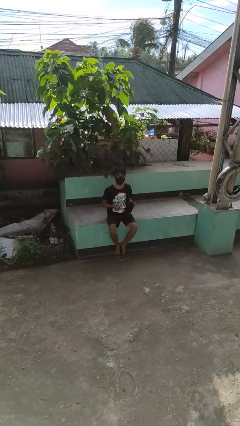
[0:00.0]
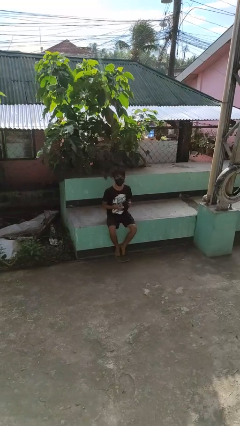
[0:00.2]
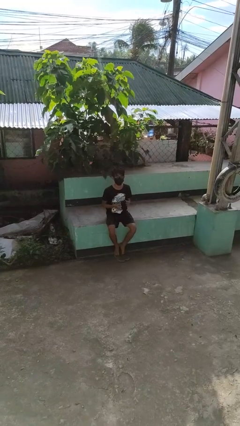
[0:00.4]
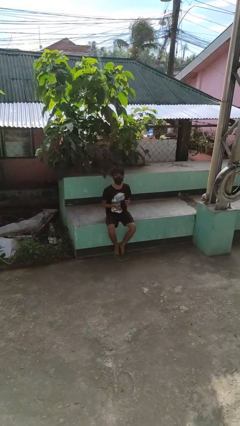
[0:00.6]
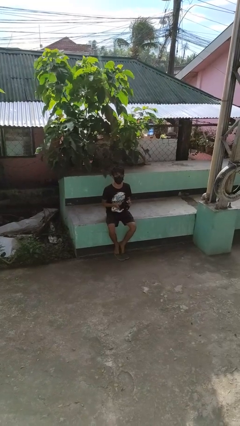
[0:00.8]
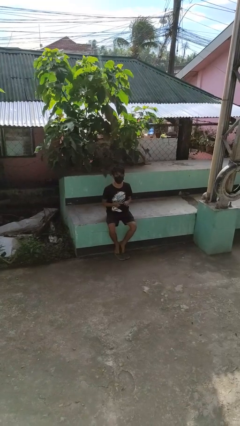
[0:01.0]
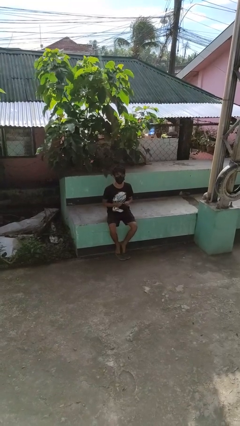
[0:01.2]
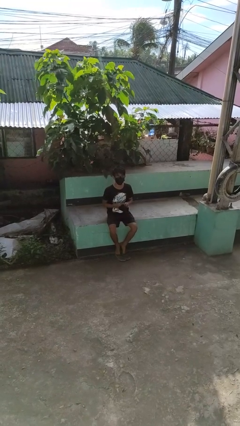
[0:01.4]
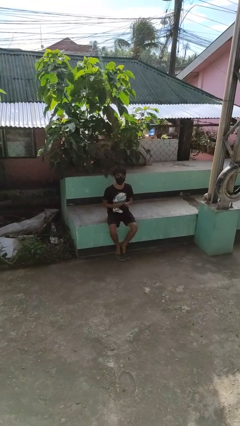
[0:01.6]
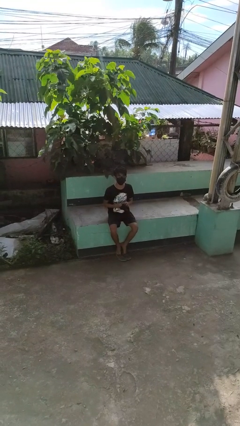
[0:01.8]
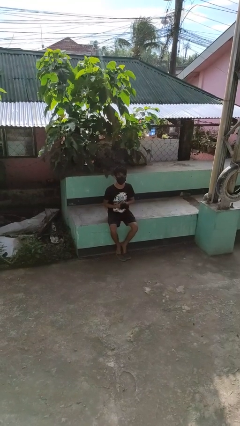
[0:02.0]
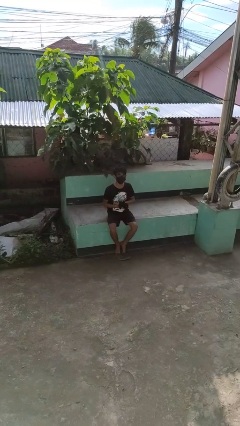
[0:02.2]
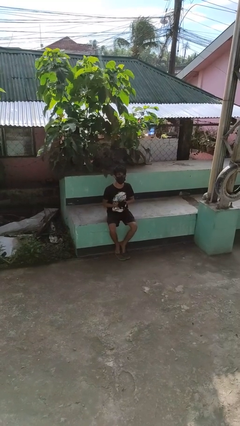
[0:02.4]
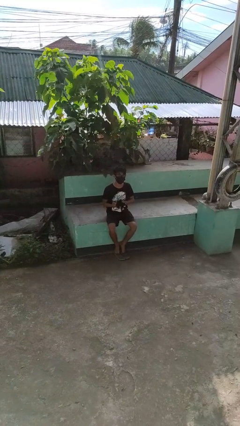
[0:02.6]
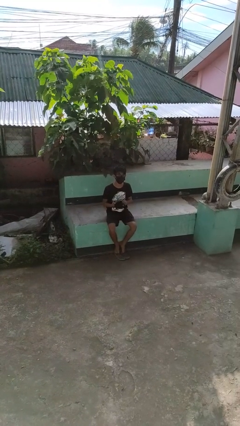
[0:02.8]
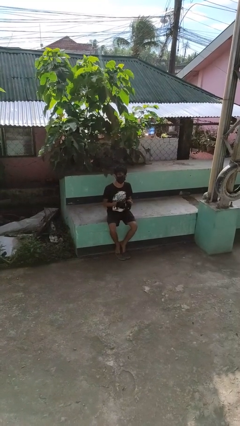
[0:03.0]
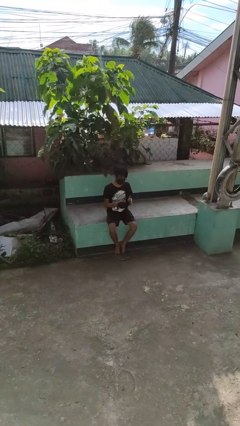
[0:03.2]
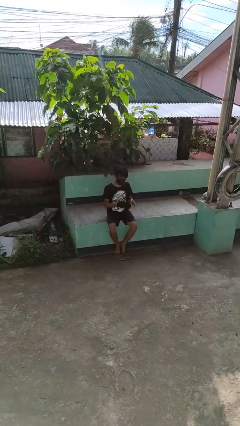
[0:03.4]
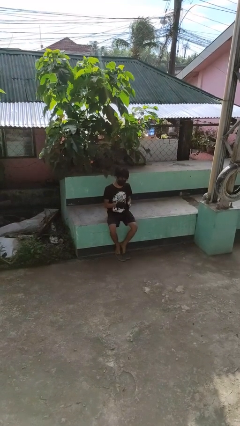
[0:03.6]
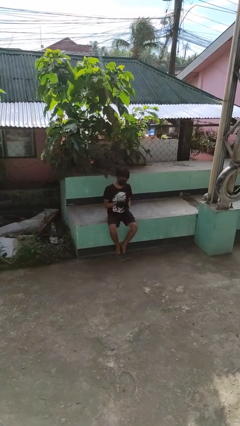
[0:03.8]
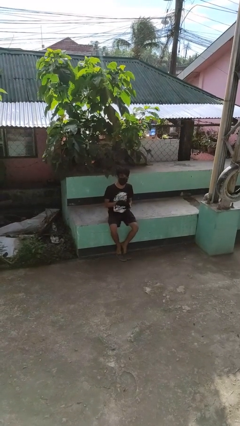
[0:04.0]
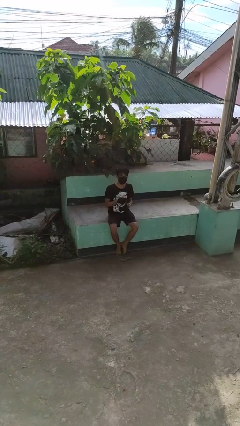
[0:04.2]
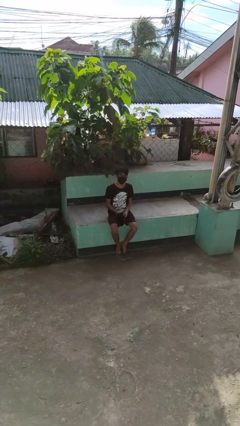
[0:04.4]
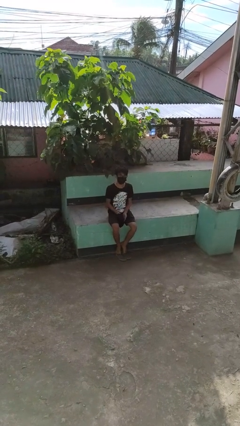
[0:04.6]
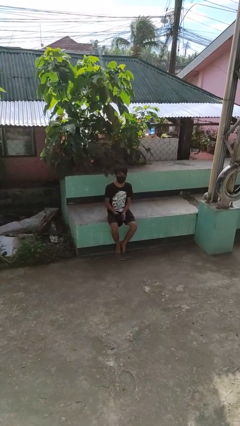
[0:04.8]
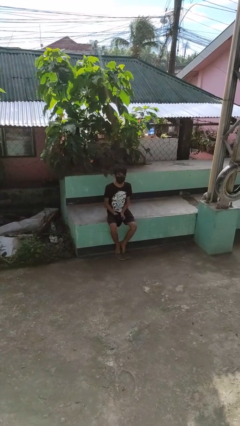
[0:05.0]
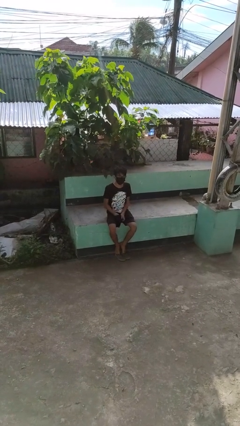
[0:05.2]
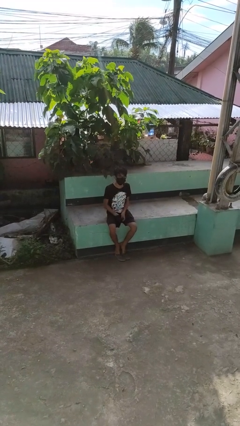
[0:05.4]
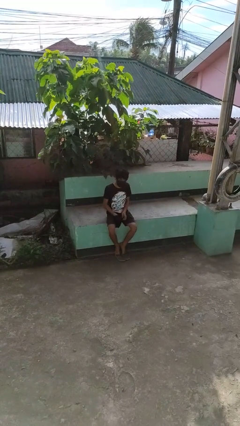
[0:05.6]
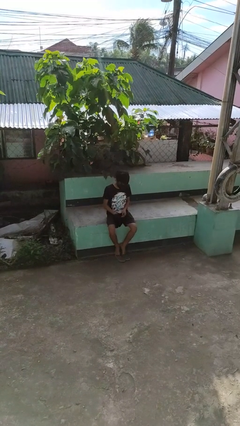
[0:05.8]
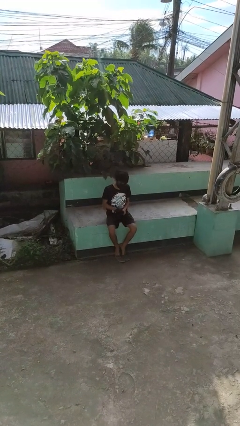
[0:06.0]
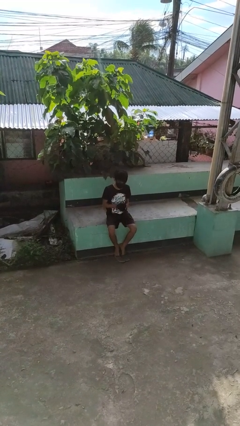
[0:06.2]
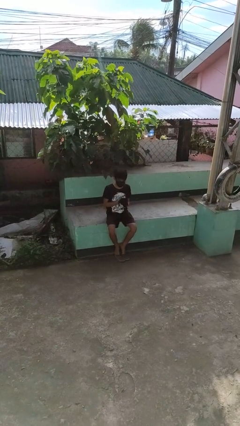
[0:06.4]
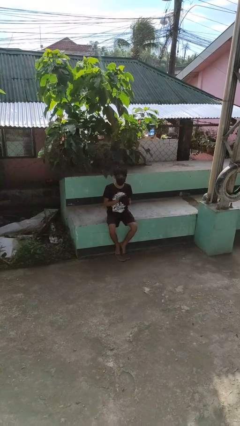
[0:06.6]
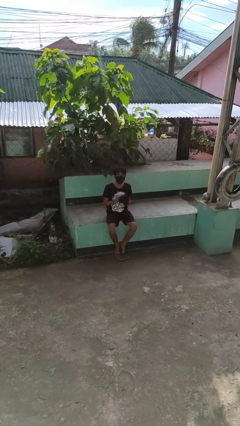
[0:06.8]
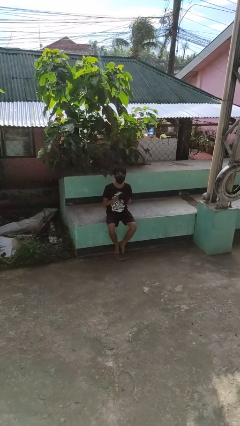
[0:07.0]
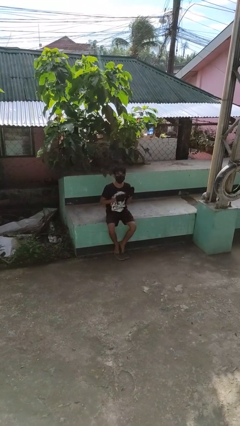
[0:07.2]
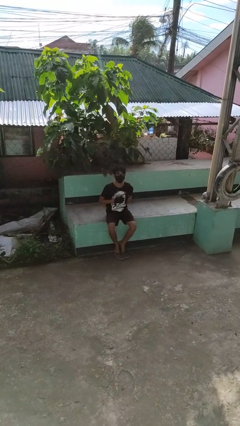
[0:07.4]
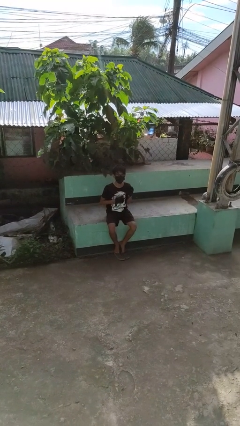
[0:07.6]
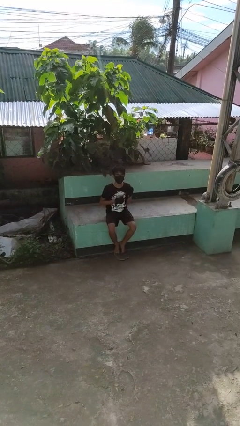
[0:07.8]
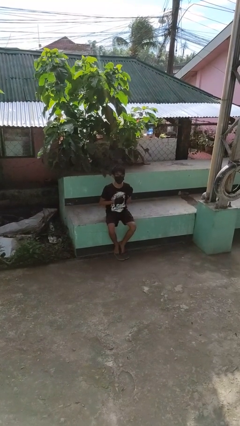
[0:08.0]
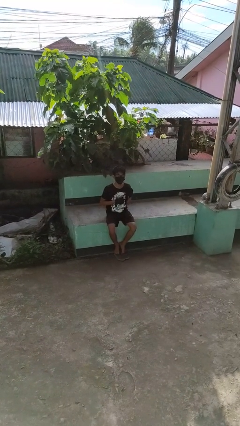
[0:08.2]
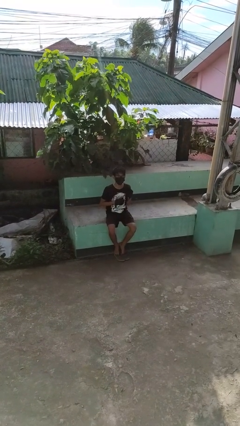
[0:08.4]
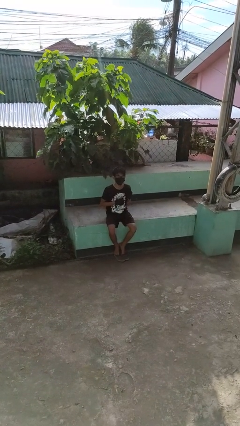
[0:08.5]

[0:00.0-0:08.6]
person puts on gloves

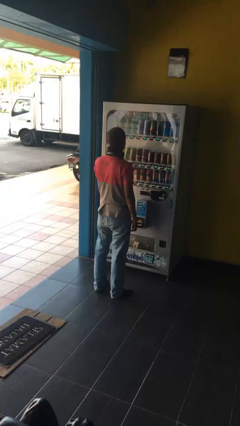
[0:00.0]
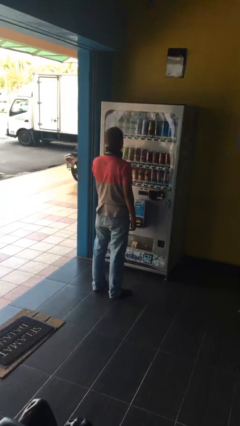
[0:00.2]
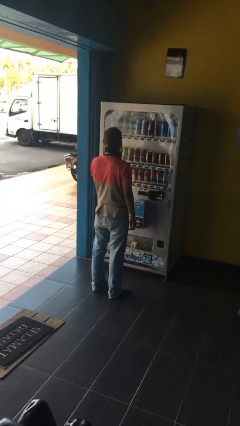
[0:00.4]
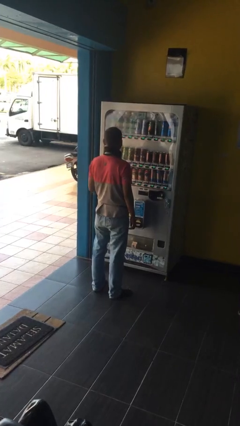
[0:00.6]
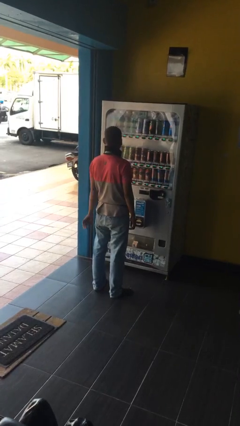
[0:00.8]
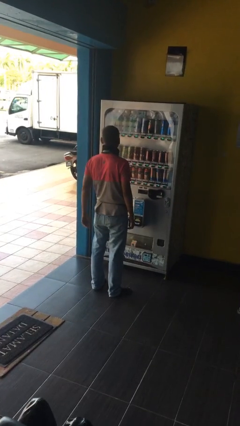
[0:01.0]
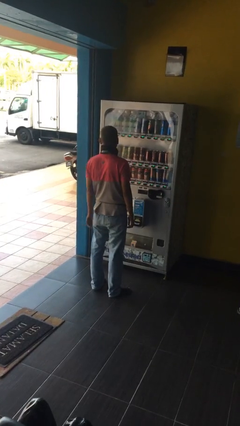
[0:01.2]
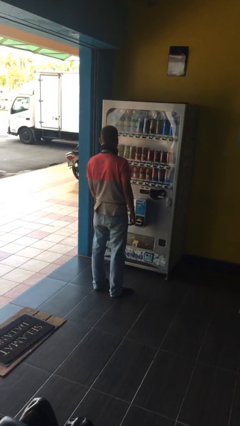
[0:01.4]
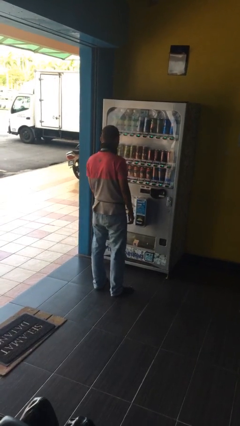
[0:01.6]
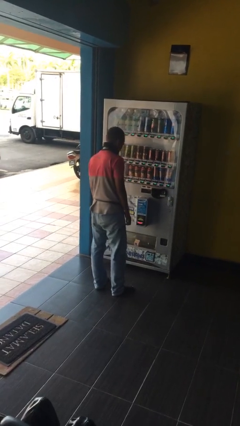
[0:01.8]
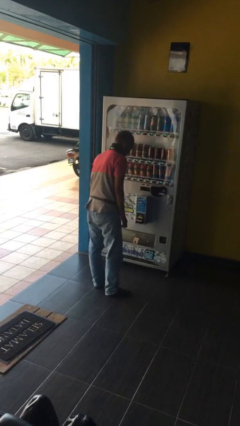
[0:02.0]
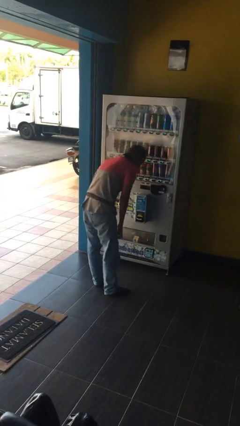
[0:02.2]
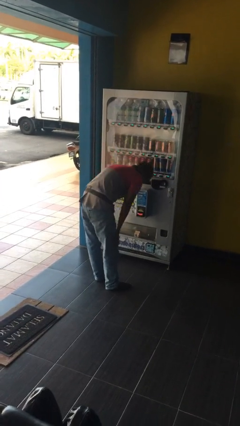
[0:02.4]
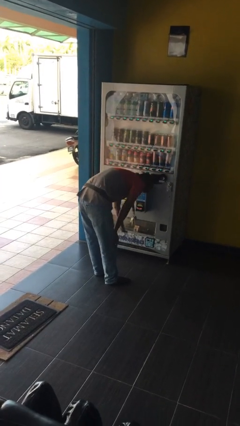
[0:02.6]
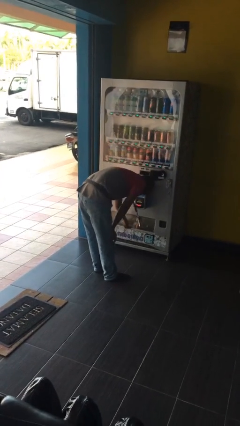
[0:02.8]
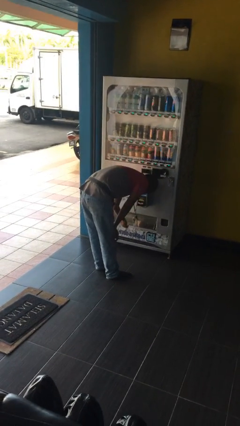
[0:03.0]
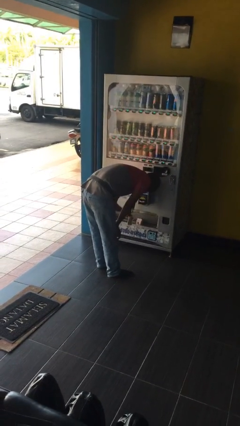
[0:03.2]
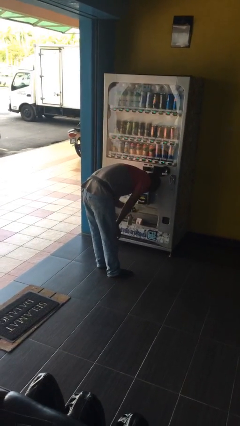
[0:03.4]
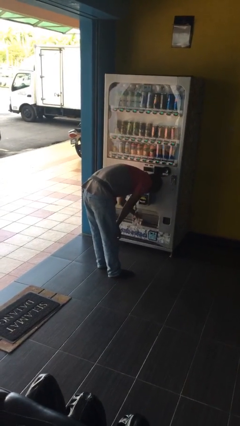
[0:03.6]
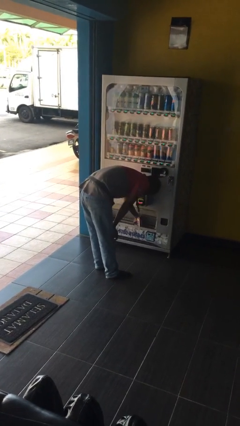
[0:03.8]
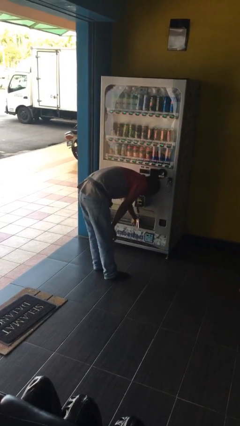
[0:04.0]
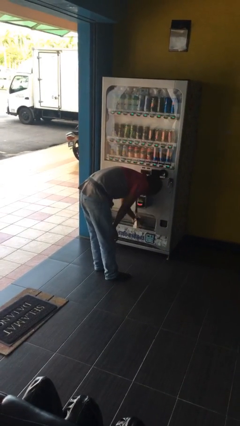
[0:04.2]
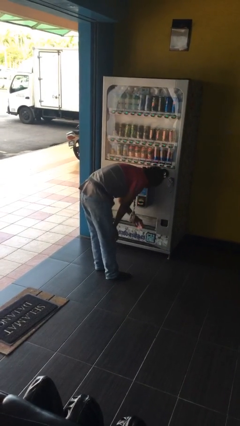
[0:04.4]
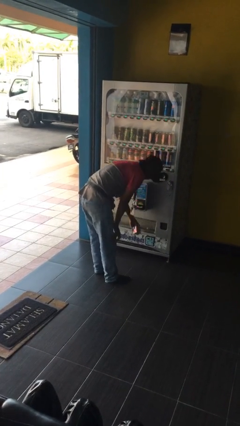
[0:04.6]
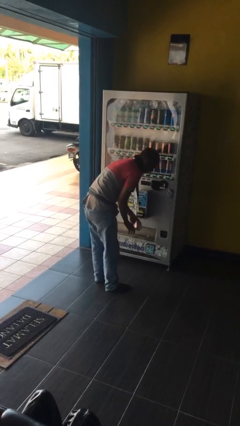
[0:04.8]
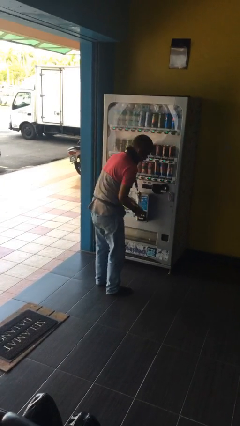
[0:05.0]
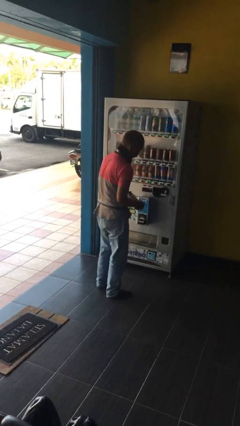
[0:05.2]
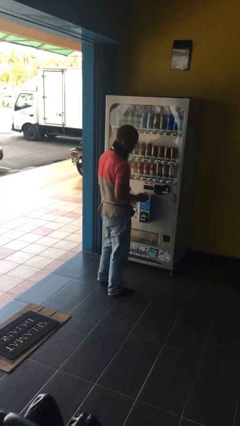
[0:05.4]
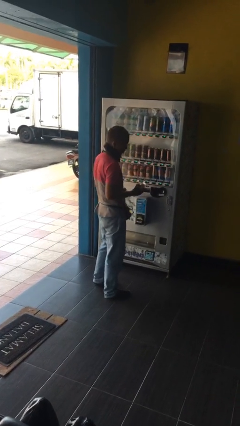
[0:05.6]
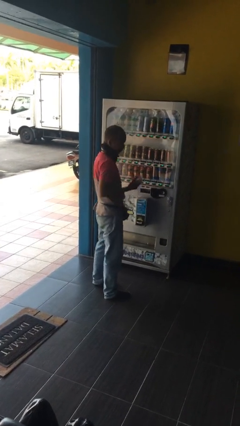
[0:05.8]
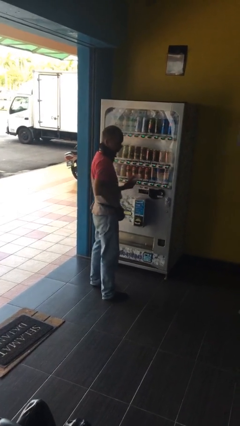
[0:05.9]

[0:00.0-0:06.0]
person purchases from machine

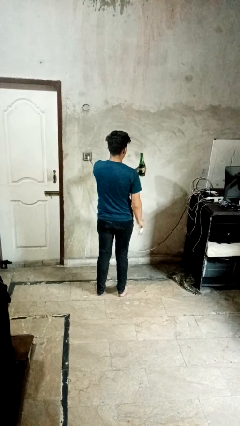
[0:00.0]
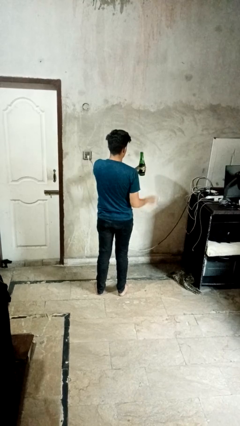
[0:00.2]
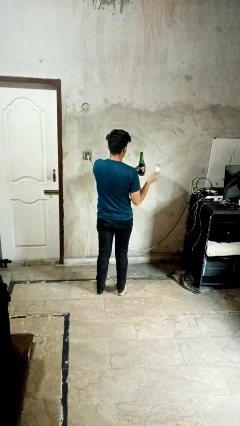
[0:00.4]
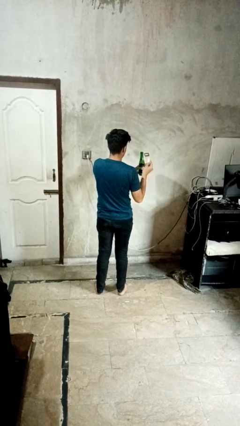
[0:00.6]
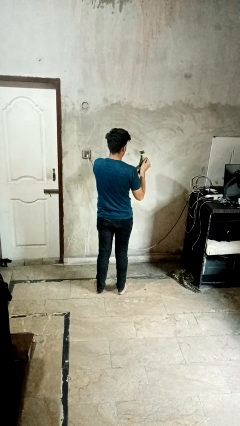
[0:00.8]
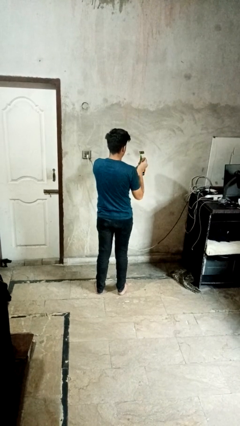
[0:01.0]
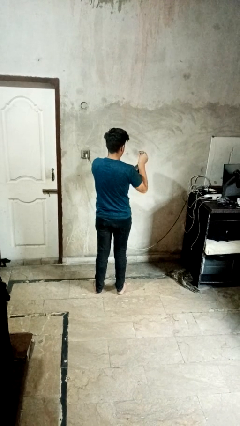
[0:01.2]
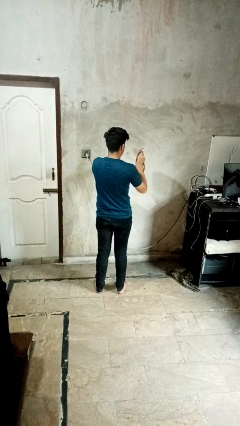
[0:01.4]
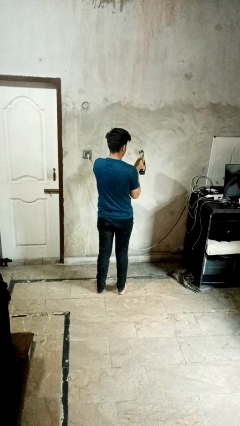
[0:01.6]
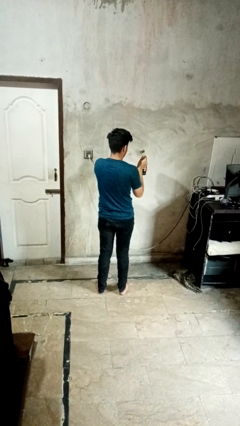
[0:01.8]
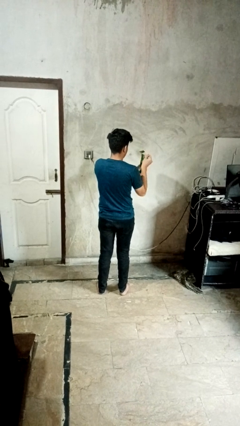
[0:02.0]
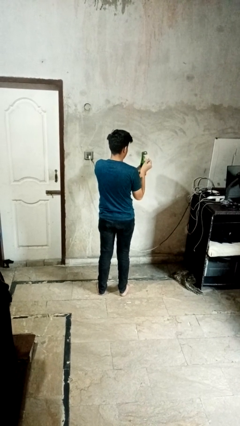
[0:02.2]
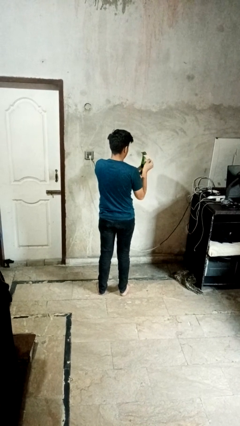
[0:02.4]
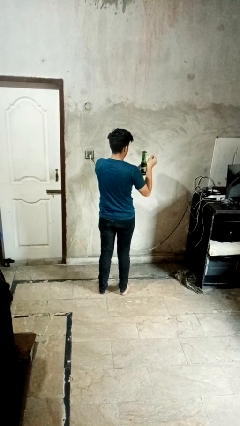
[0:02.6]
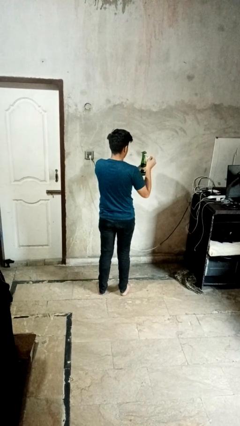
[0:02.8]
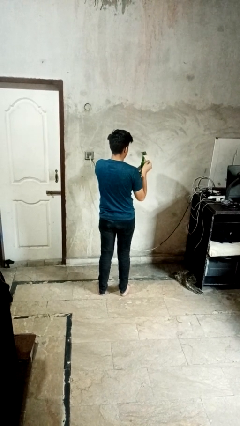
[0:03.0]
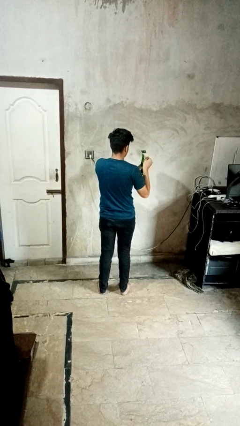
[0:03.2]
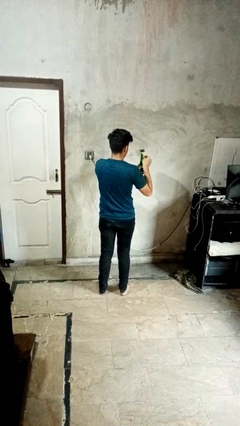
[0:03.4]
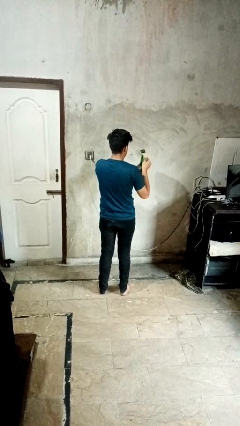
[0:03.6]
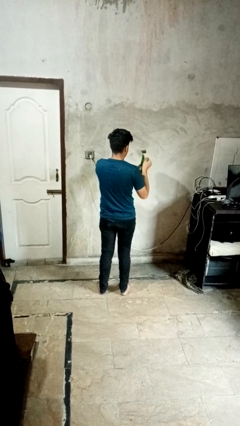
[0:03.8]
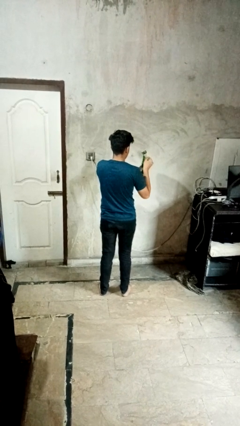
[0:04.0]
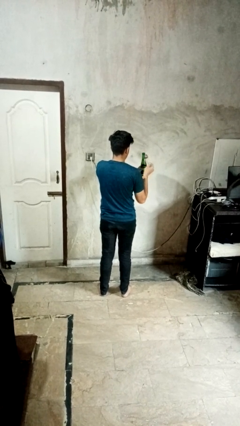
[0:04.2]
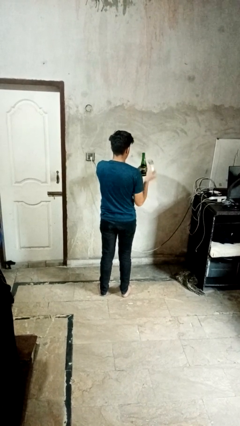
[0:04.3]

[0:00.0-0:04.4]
person opens can with can opener
